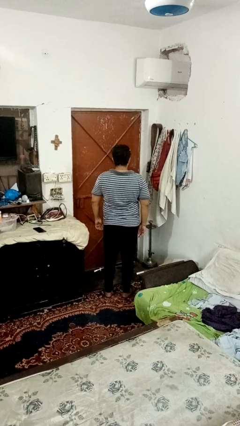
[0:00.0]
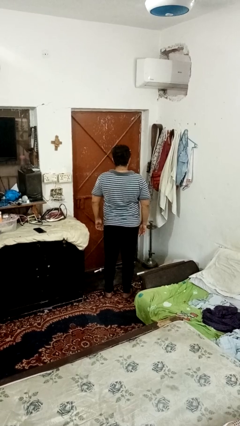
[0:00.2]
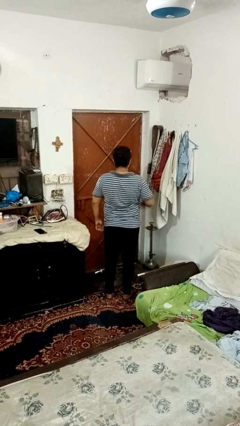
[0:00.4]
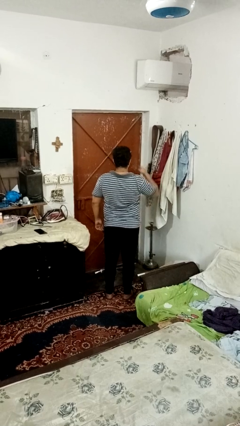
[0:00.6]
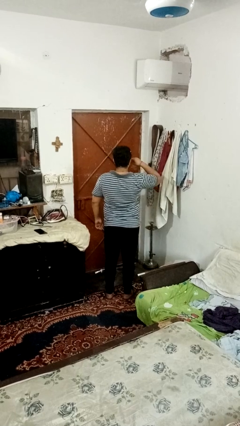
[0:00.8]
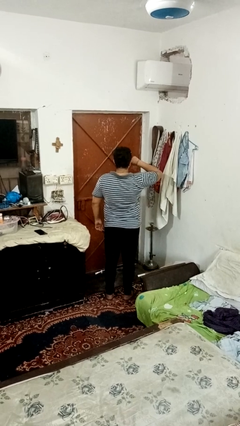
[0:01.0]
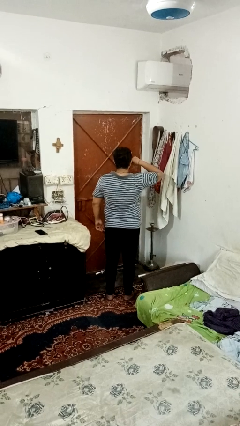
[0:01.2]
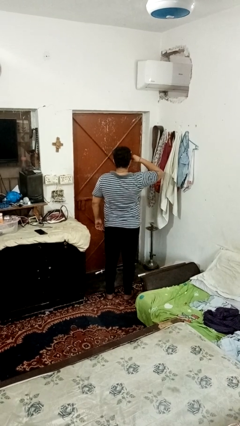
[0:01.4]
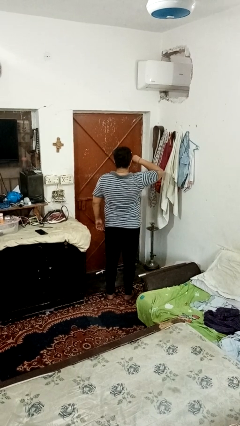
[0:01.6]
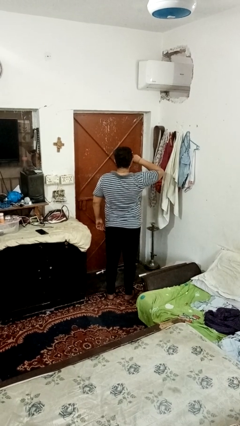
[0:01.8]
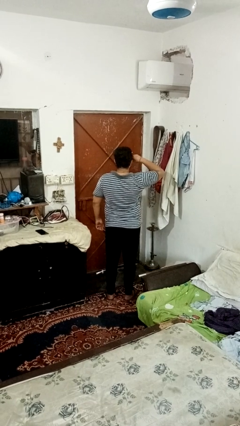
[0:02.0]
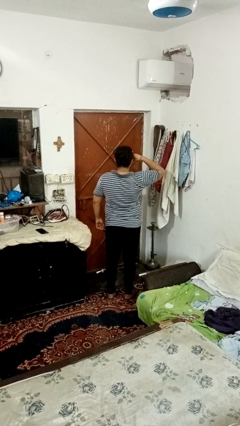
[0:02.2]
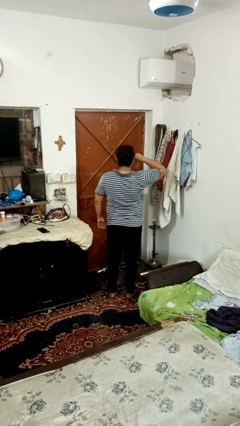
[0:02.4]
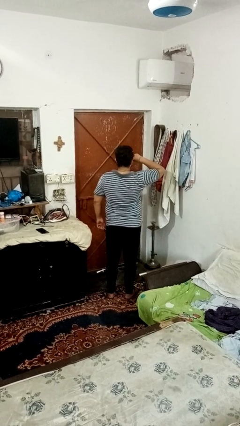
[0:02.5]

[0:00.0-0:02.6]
person rubs eyes

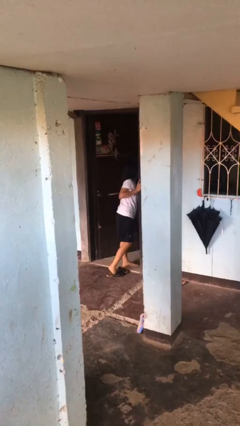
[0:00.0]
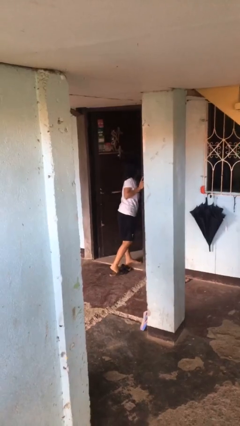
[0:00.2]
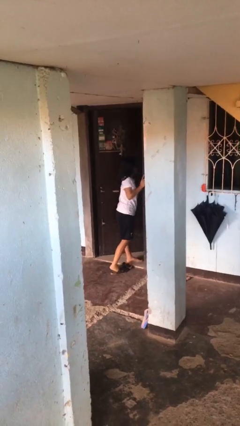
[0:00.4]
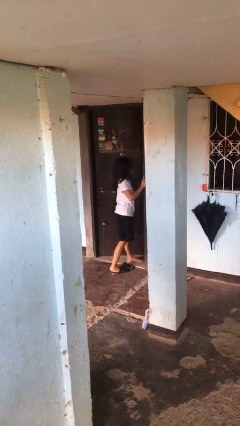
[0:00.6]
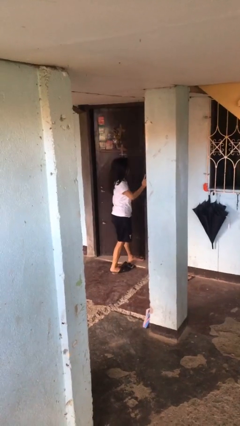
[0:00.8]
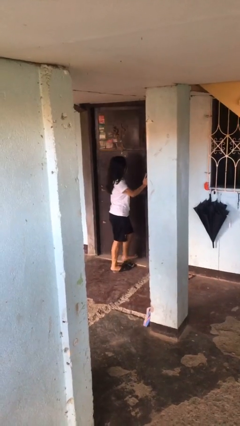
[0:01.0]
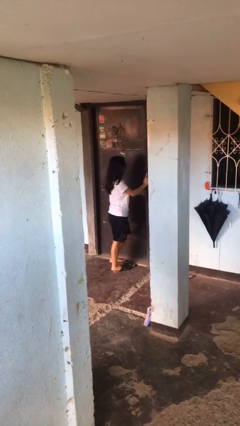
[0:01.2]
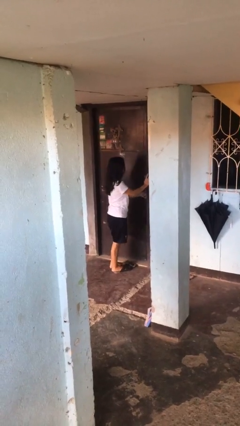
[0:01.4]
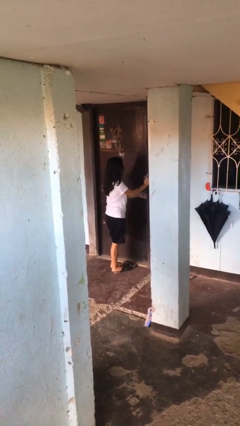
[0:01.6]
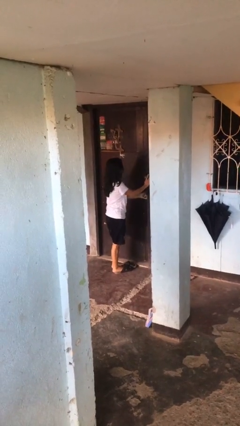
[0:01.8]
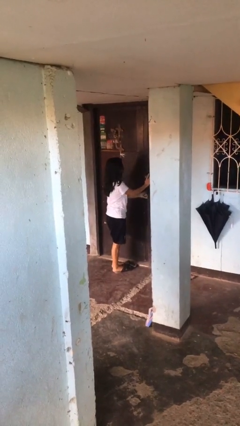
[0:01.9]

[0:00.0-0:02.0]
person closes facility door

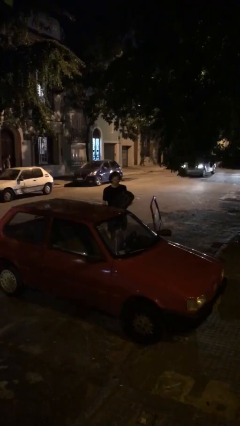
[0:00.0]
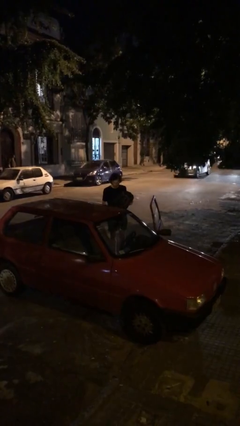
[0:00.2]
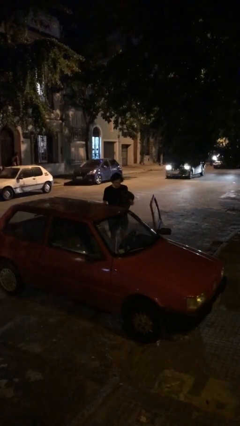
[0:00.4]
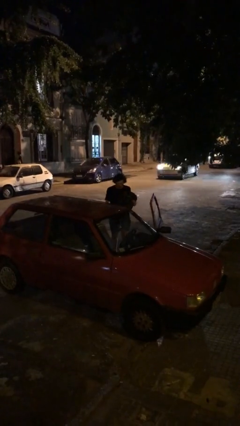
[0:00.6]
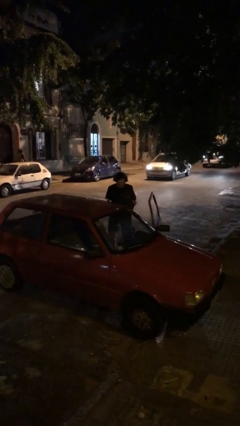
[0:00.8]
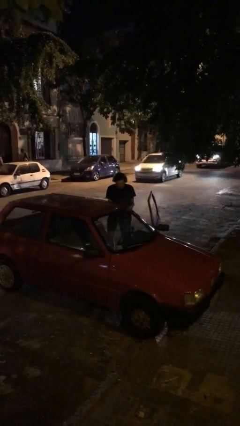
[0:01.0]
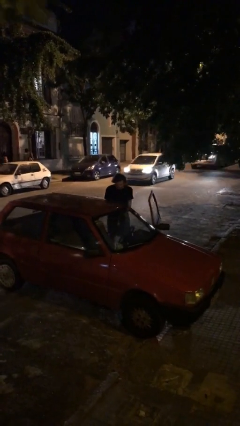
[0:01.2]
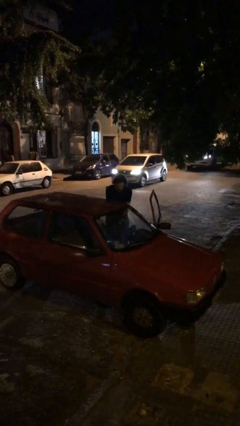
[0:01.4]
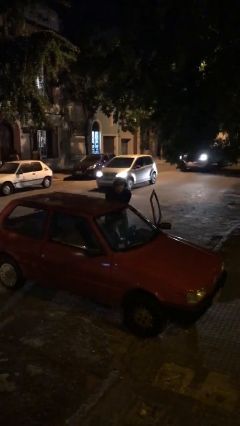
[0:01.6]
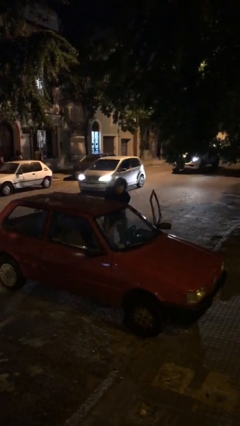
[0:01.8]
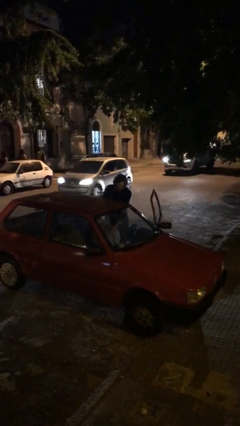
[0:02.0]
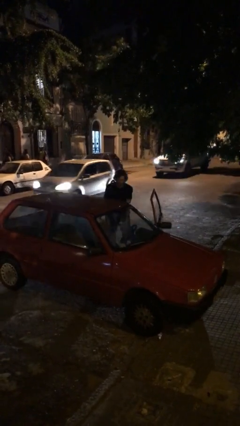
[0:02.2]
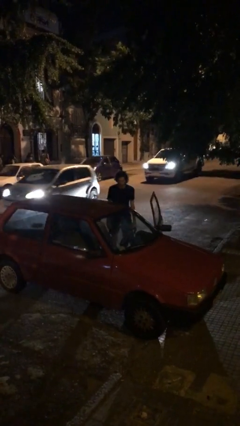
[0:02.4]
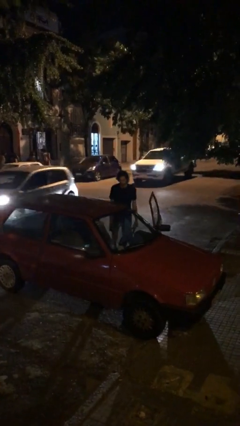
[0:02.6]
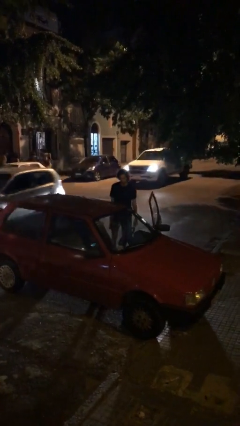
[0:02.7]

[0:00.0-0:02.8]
person loads car

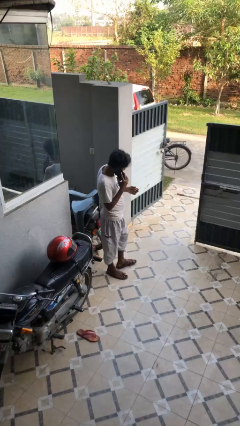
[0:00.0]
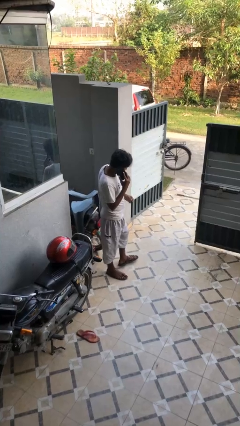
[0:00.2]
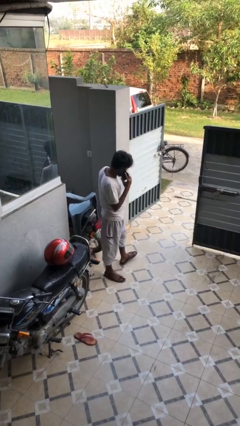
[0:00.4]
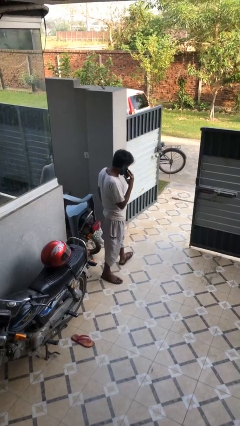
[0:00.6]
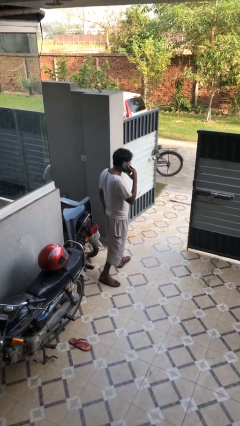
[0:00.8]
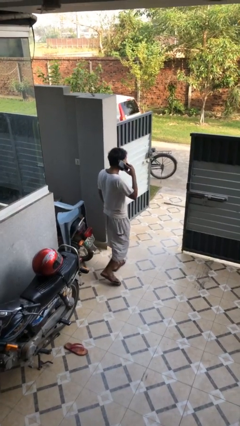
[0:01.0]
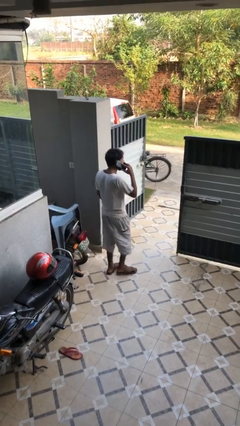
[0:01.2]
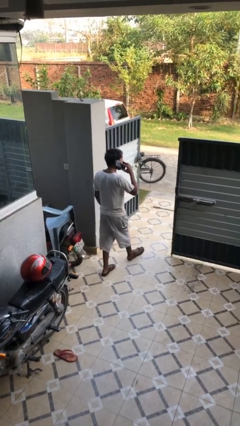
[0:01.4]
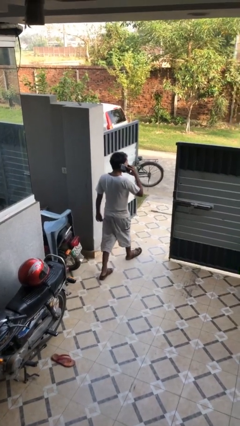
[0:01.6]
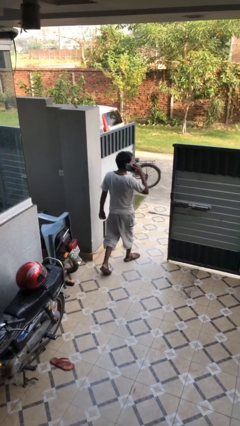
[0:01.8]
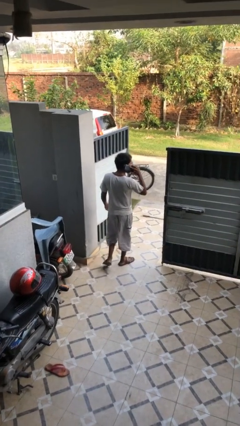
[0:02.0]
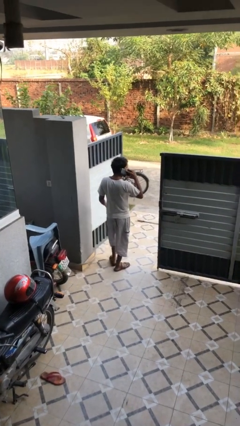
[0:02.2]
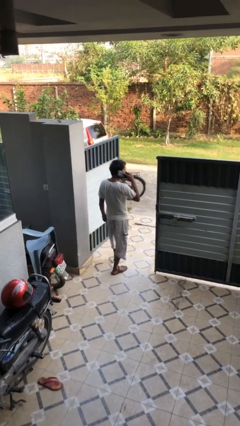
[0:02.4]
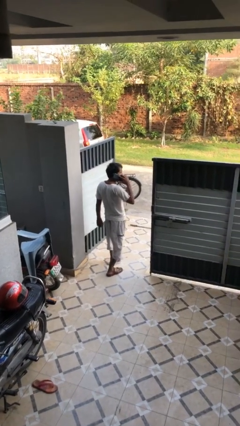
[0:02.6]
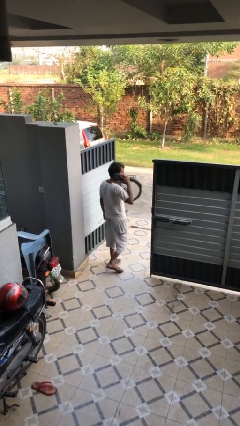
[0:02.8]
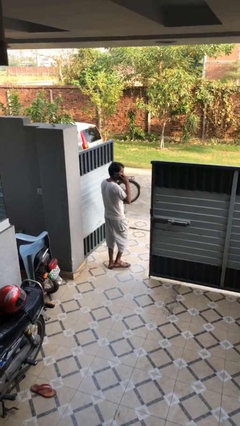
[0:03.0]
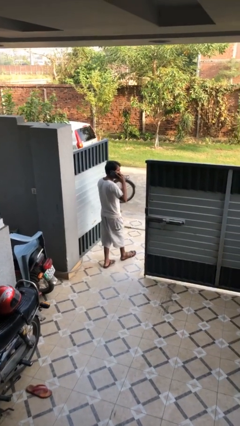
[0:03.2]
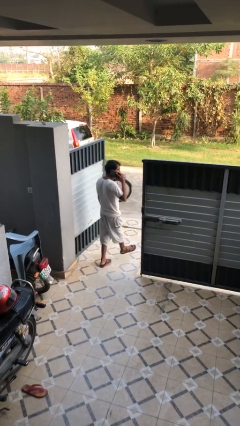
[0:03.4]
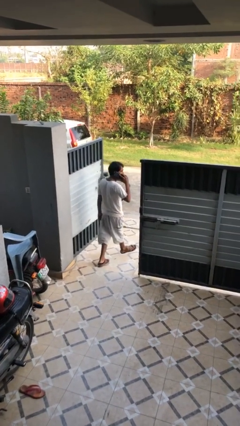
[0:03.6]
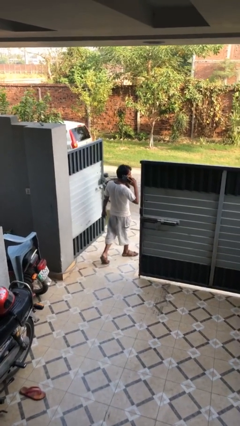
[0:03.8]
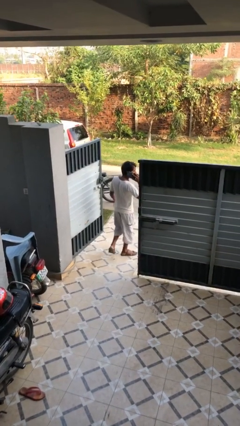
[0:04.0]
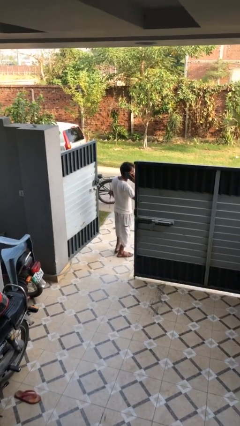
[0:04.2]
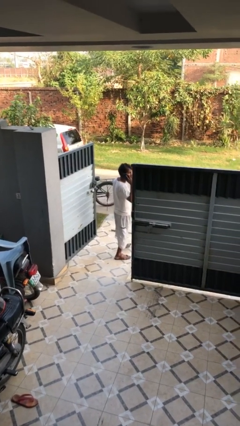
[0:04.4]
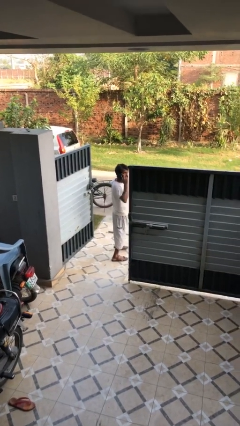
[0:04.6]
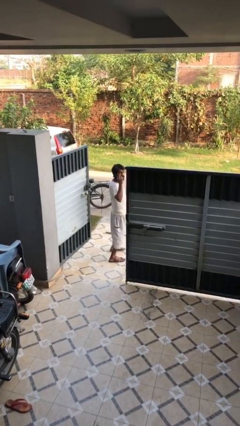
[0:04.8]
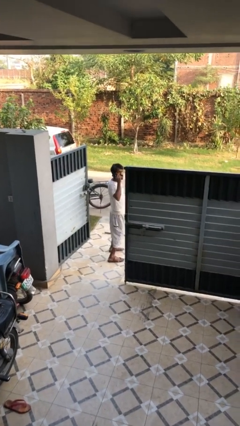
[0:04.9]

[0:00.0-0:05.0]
person exits scene through structure

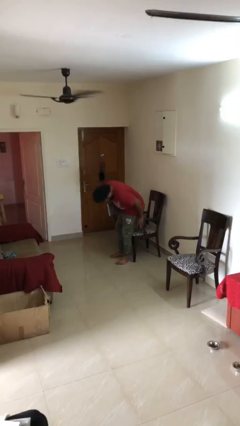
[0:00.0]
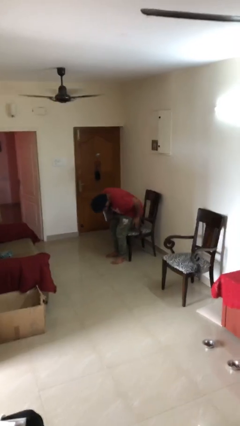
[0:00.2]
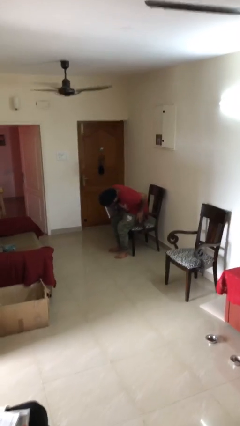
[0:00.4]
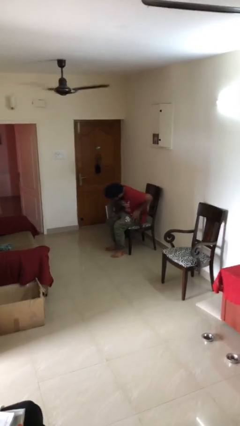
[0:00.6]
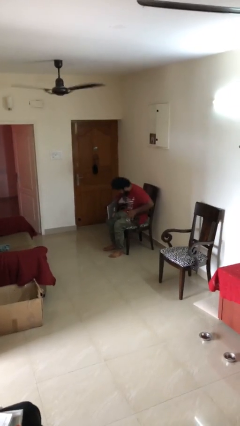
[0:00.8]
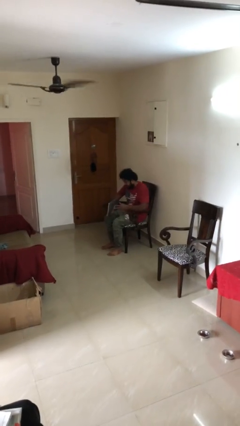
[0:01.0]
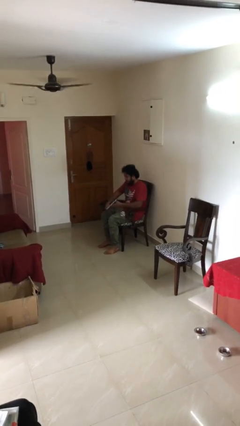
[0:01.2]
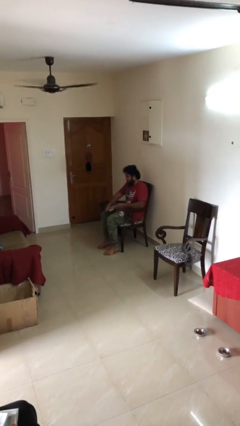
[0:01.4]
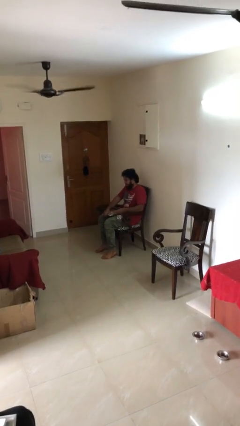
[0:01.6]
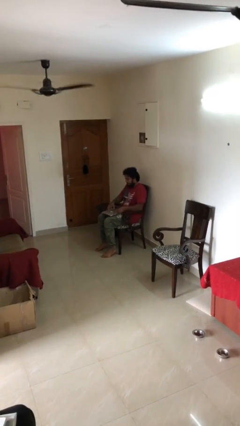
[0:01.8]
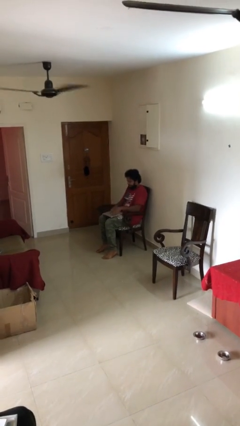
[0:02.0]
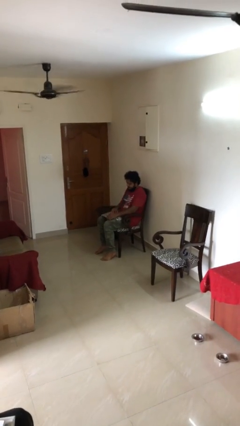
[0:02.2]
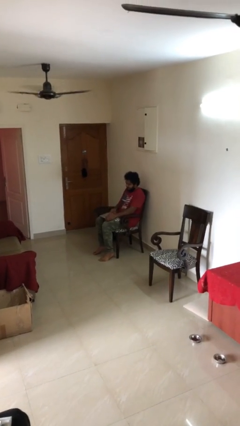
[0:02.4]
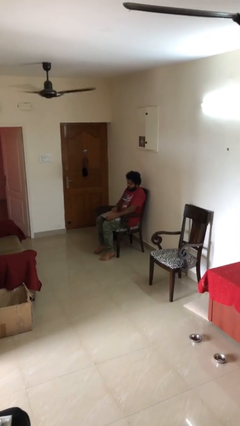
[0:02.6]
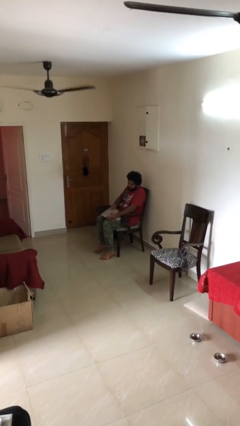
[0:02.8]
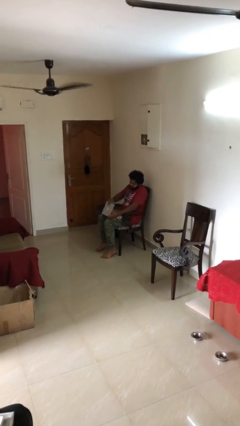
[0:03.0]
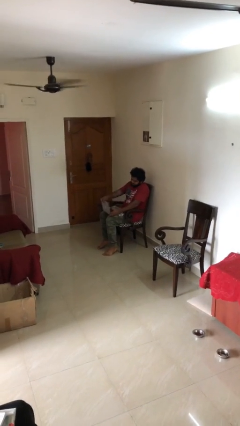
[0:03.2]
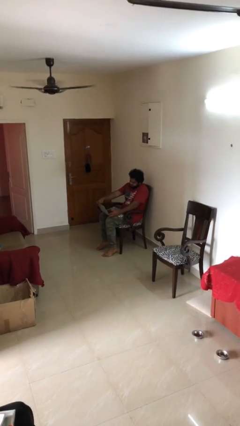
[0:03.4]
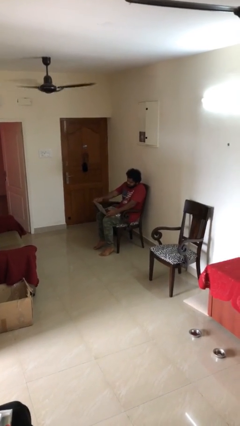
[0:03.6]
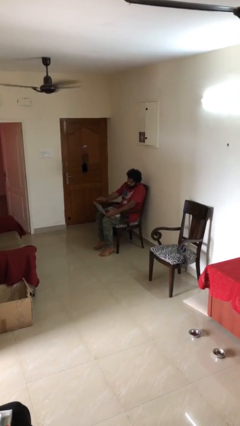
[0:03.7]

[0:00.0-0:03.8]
person sits down

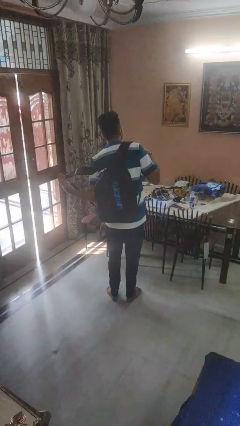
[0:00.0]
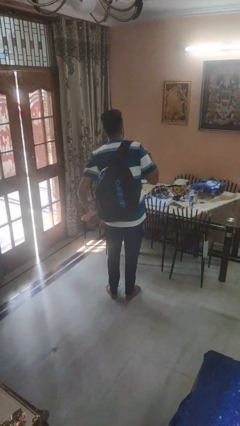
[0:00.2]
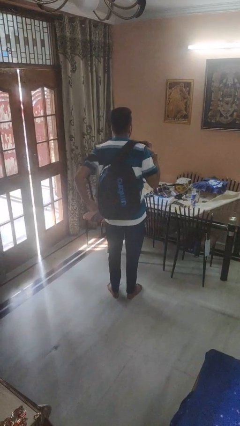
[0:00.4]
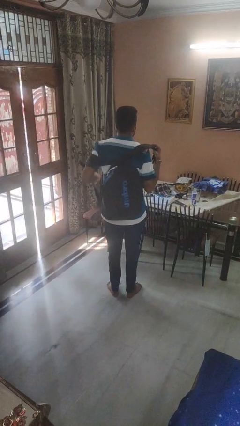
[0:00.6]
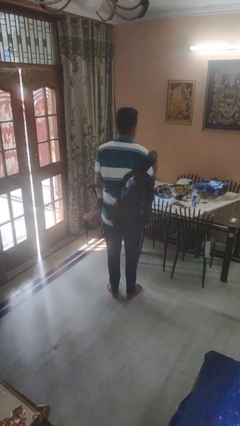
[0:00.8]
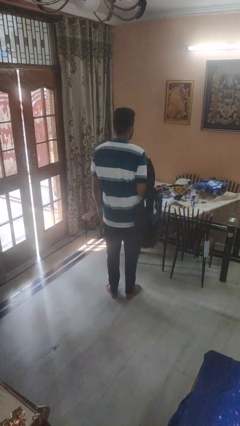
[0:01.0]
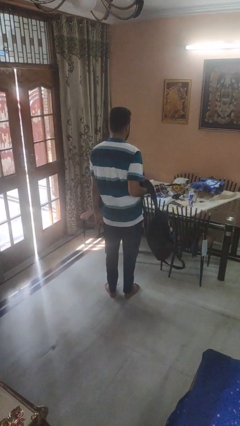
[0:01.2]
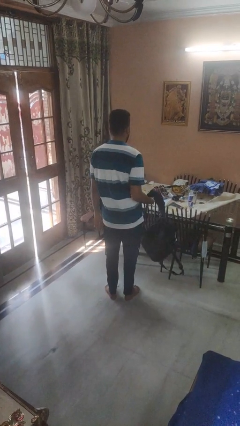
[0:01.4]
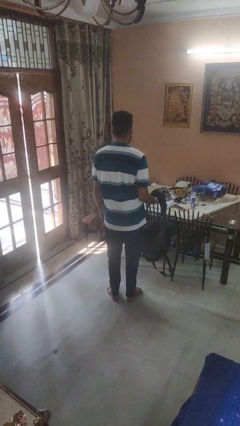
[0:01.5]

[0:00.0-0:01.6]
person takes off backpack
